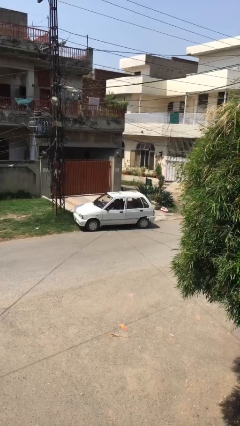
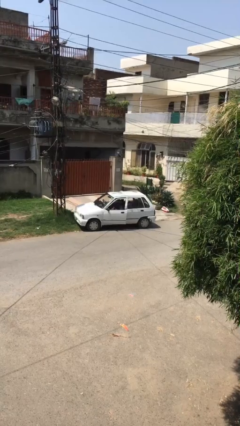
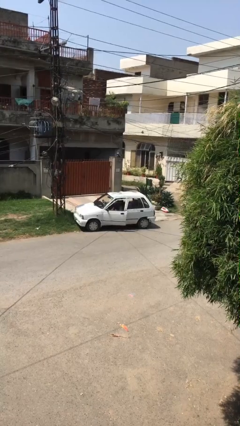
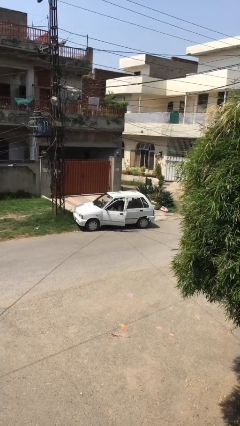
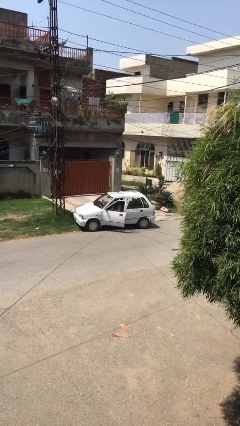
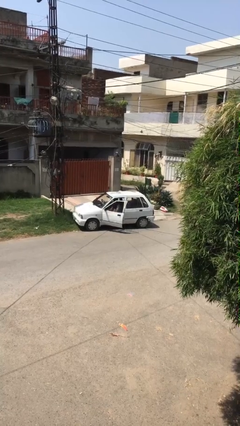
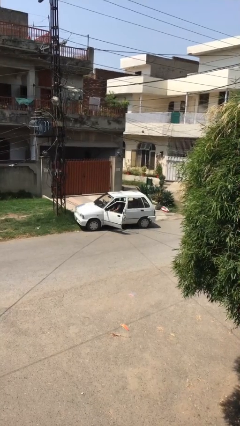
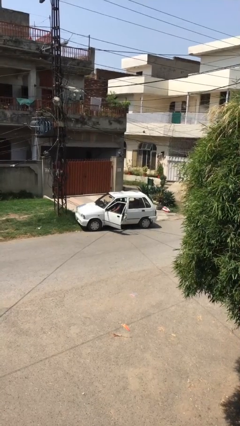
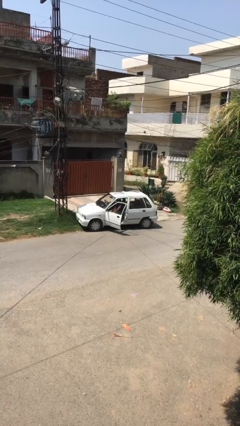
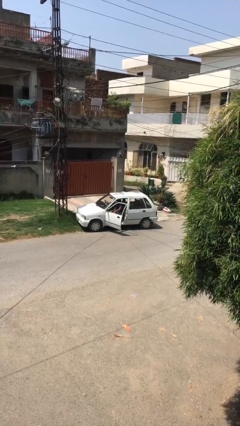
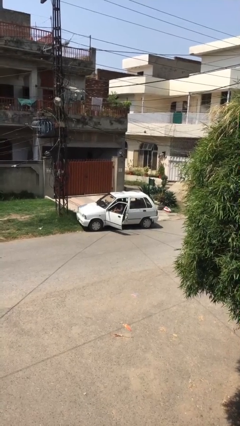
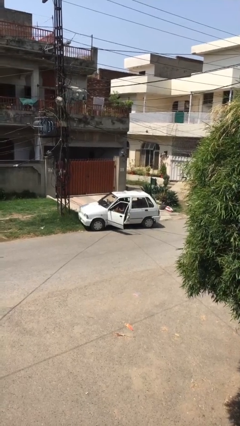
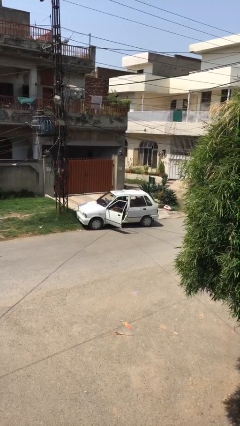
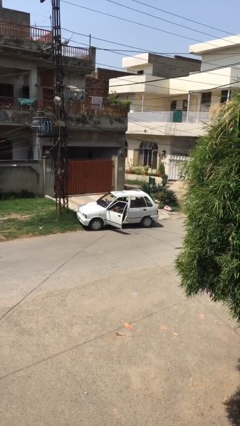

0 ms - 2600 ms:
person opens car door

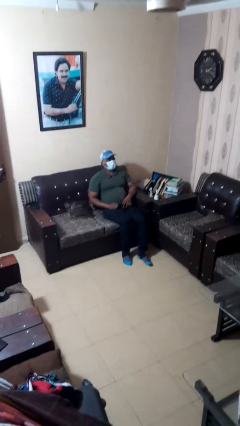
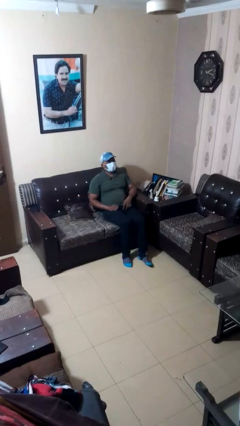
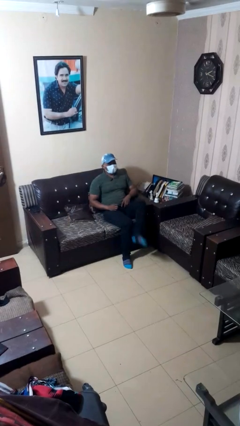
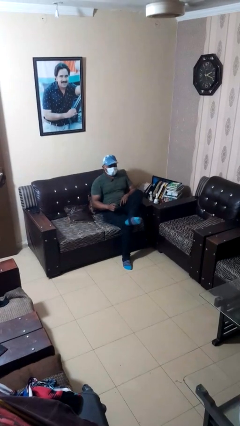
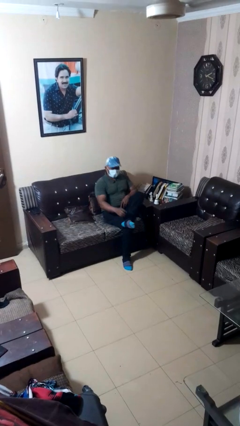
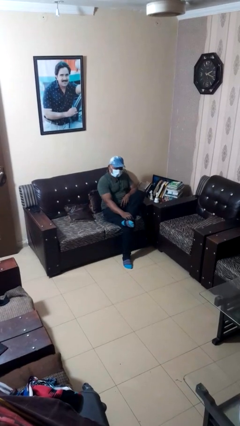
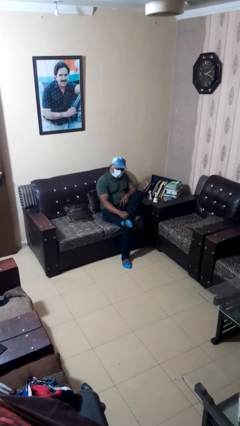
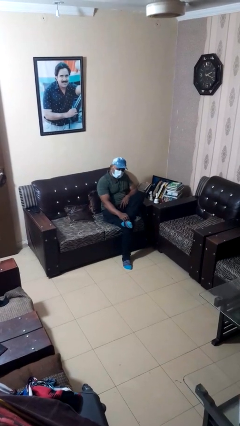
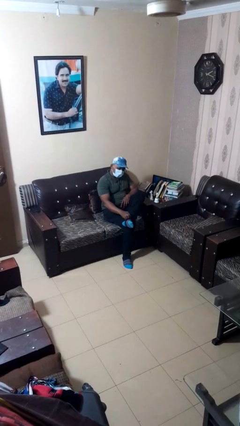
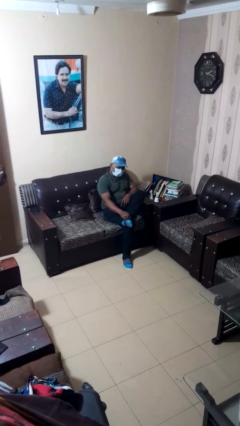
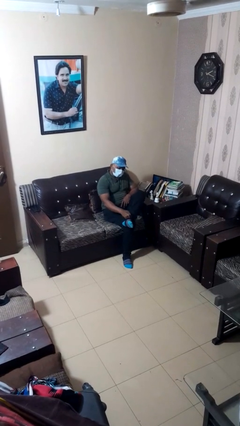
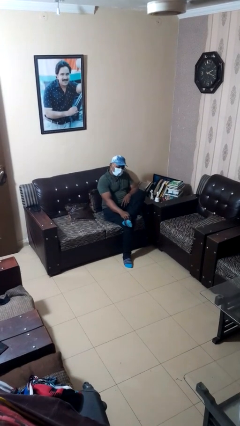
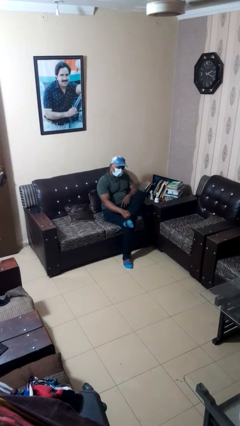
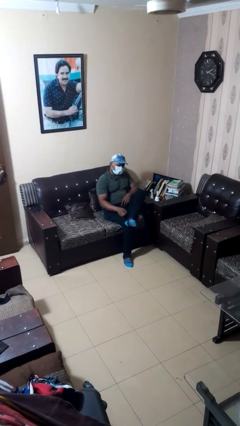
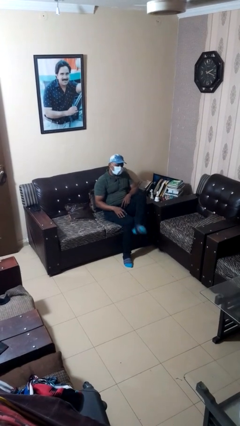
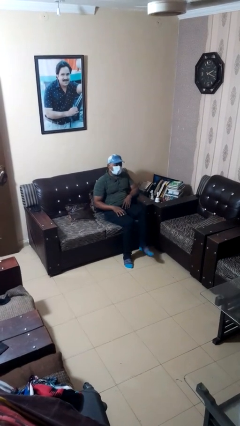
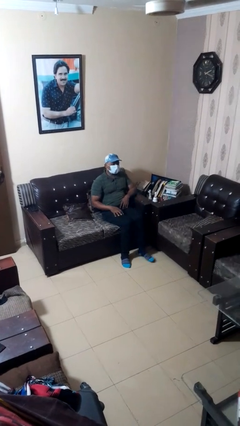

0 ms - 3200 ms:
person rubs foot

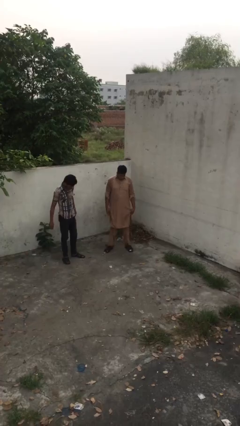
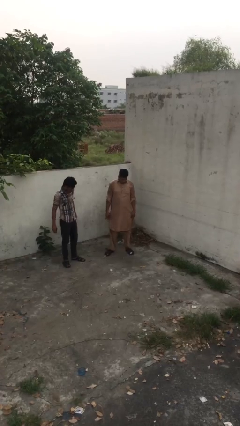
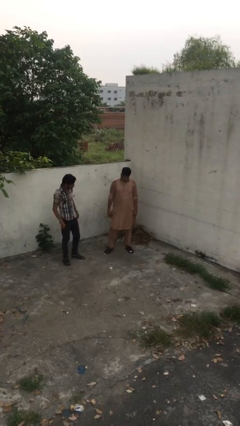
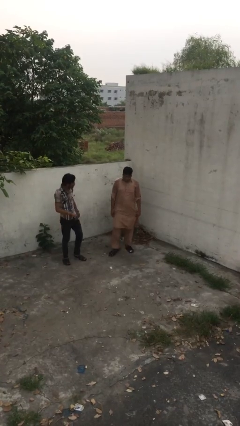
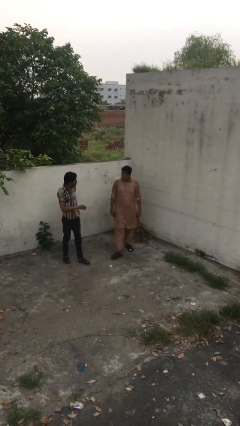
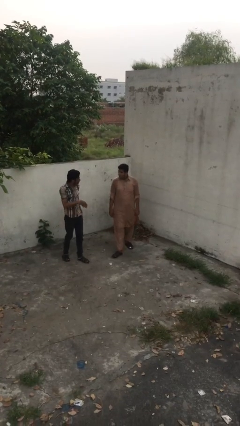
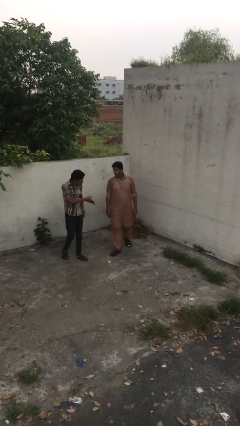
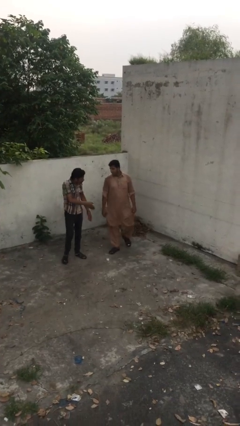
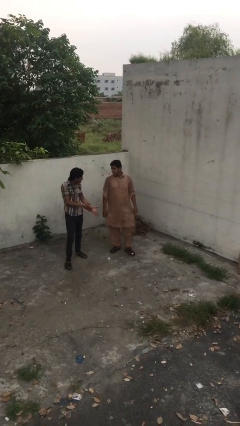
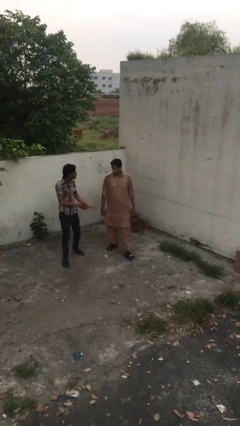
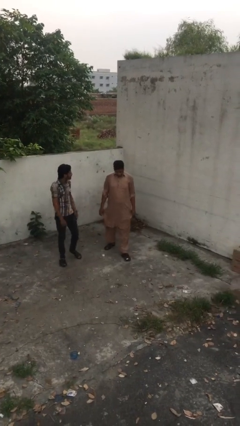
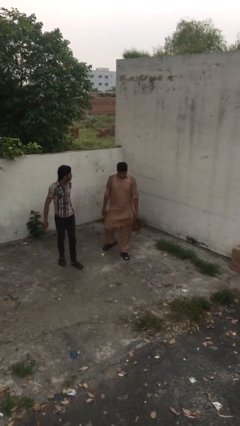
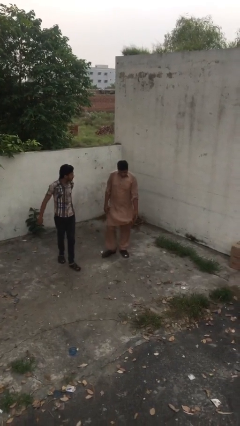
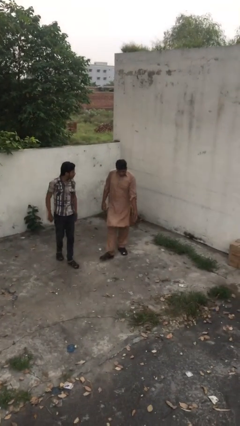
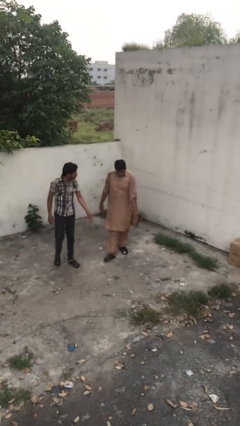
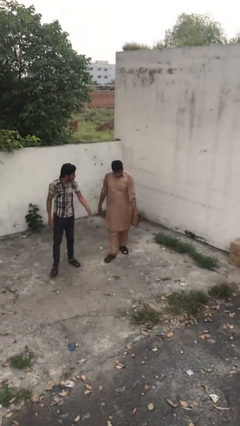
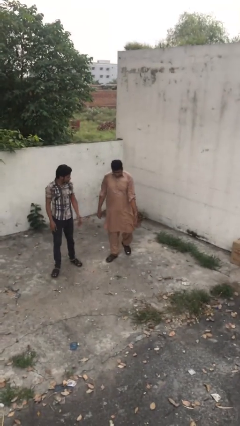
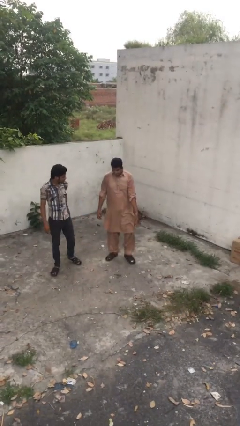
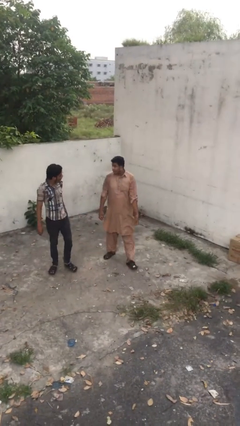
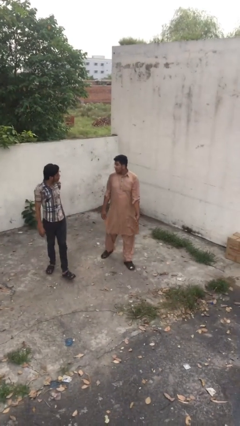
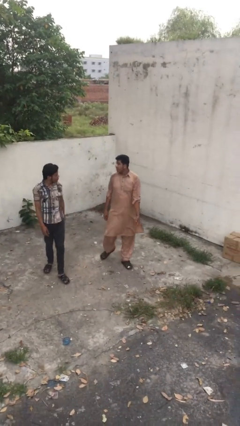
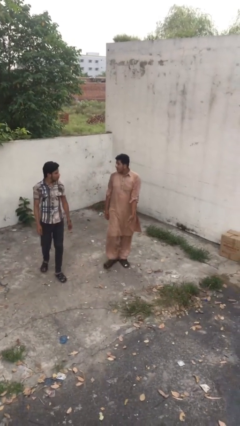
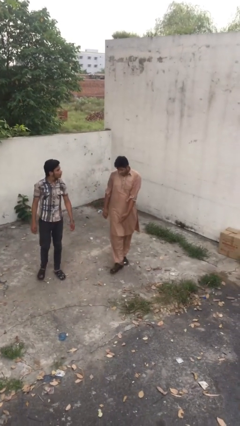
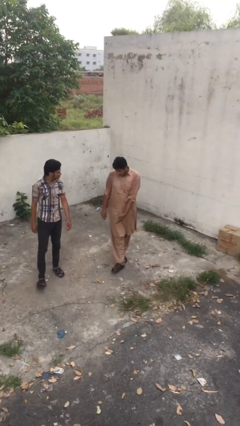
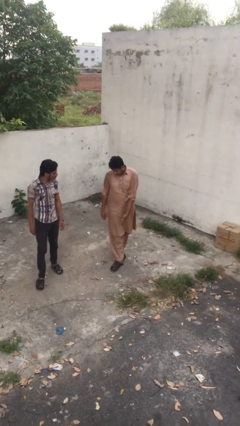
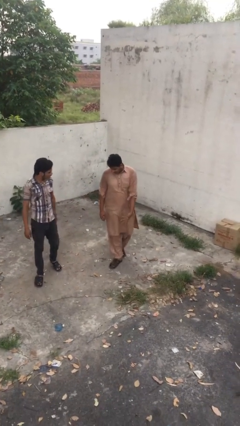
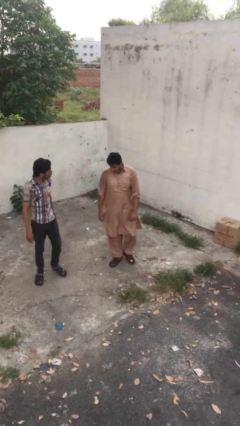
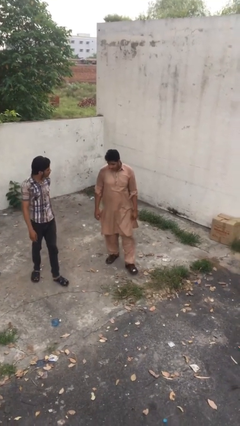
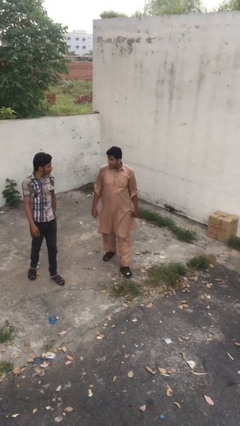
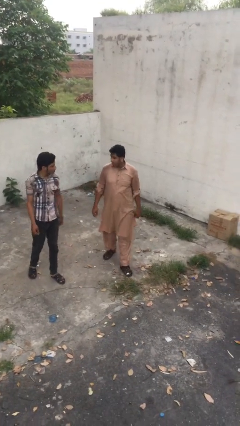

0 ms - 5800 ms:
person talks to person

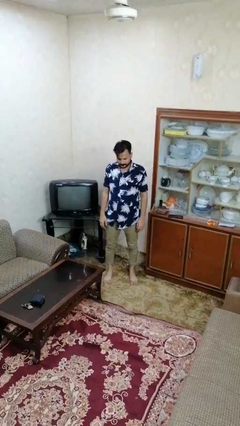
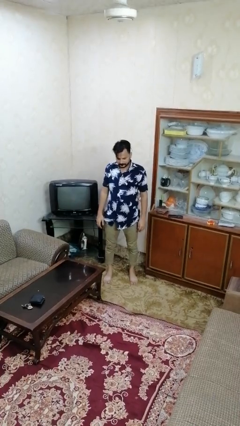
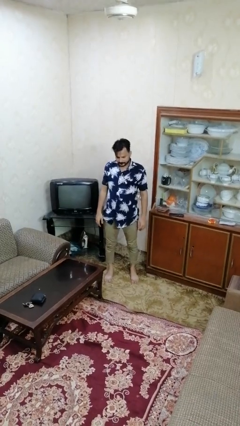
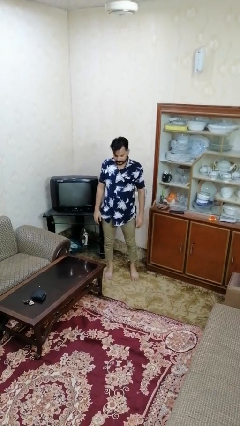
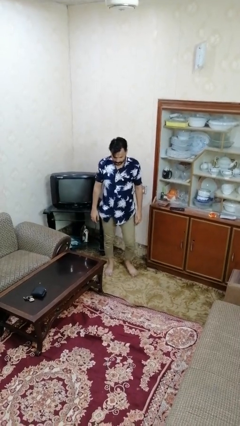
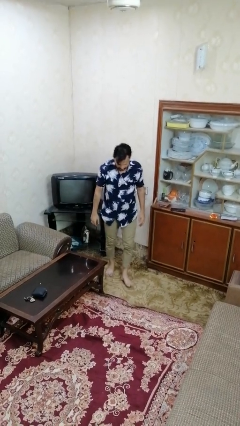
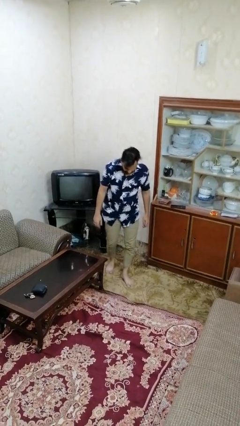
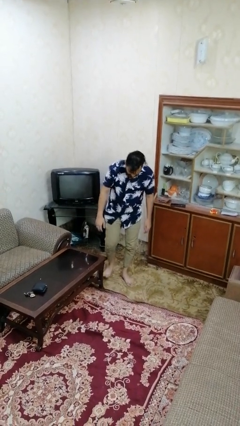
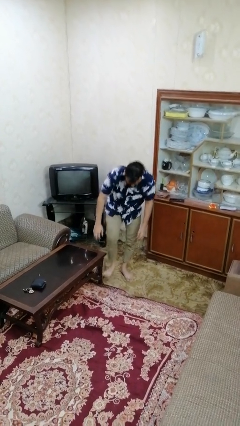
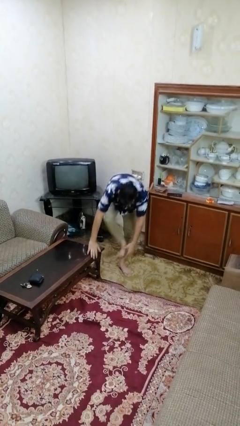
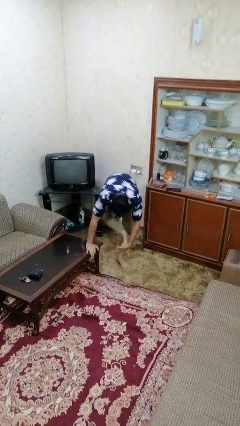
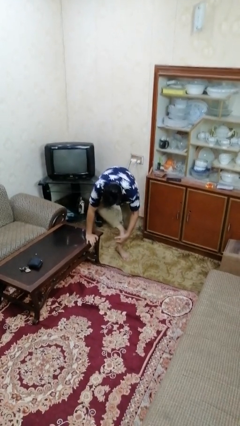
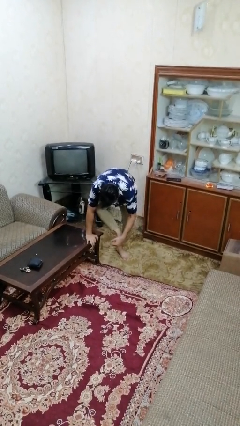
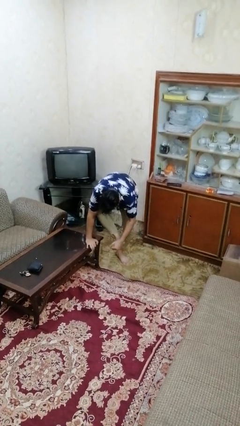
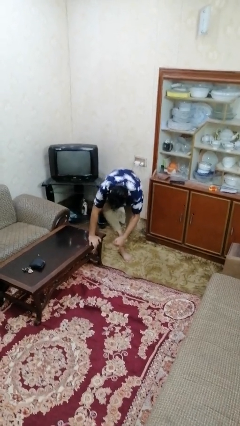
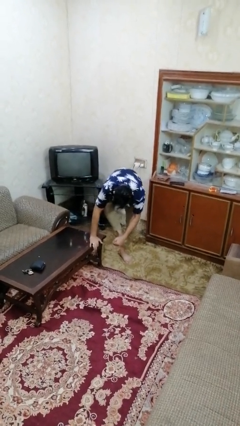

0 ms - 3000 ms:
person trips on object on floor

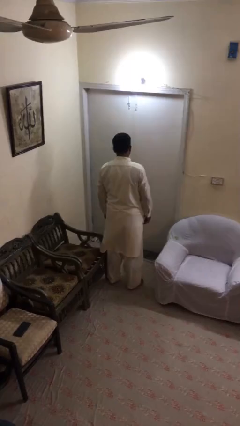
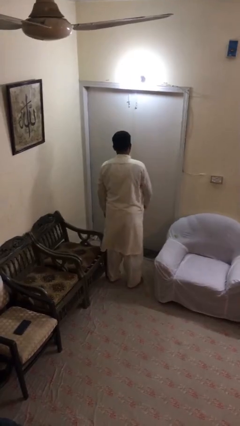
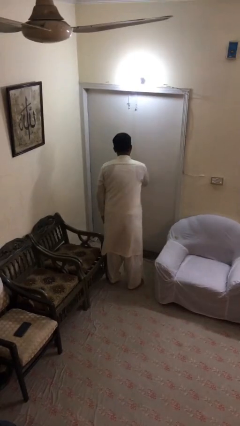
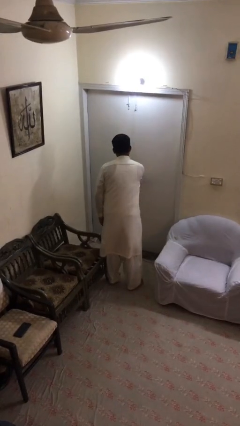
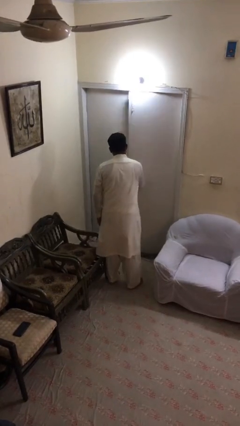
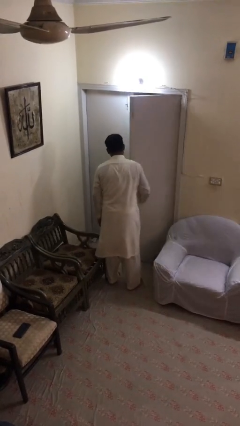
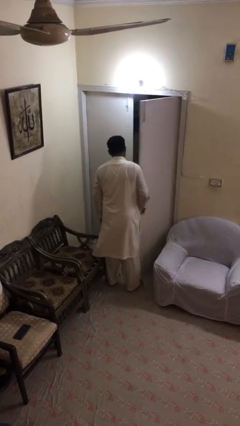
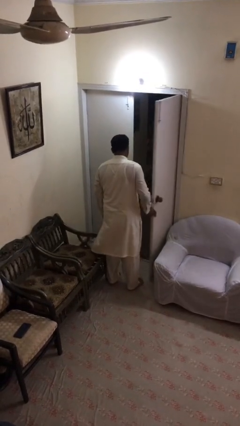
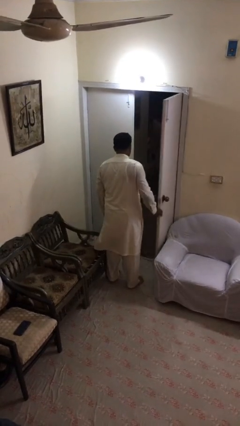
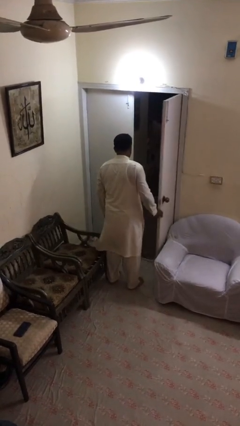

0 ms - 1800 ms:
person opens facility door

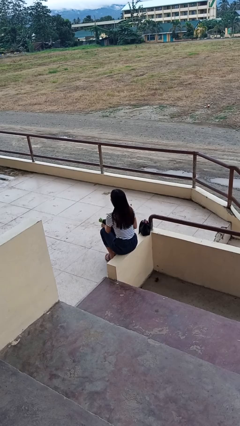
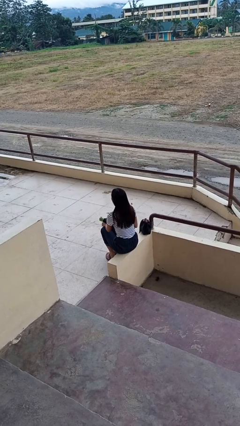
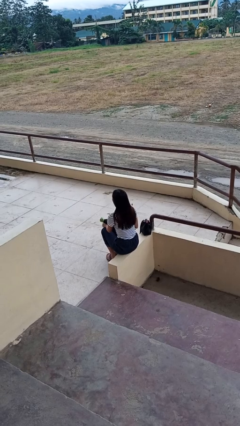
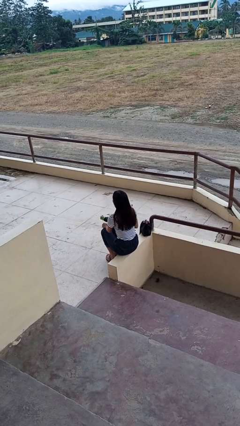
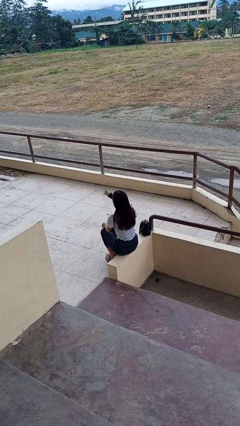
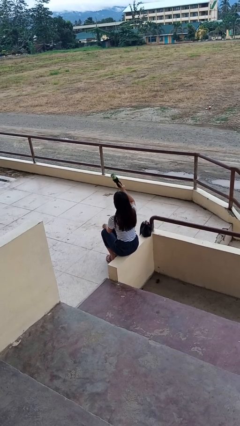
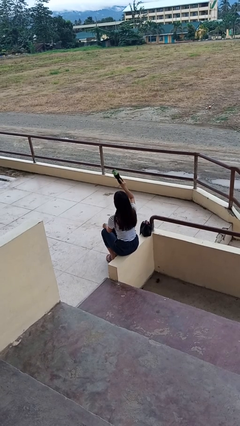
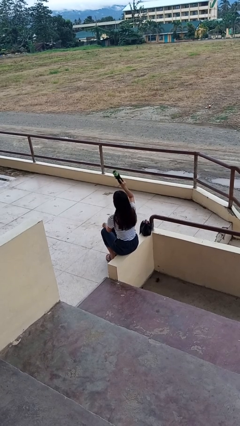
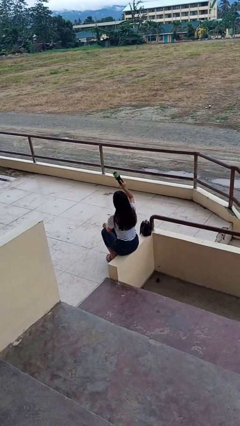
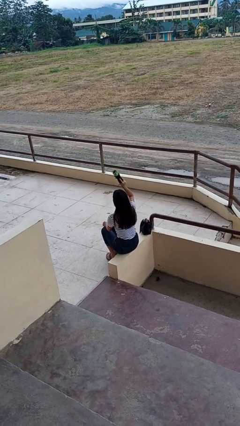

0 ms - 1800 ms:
person holds object above head
